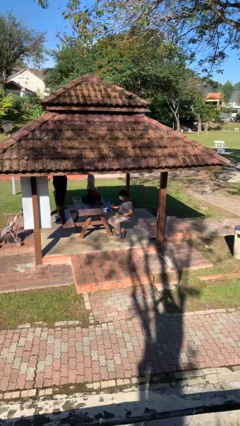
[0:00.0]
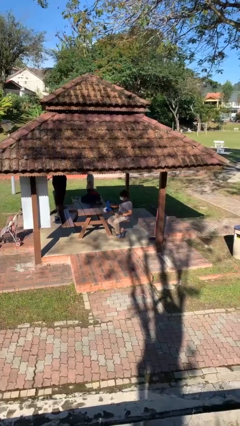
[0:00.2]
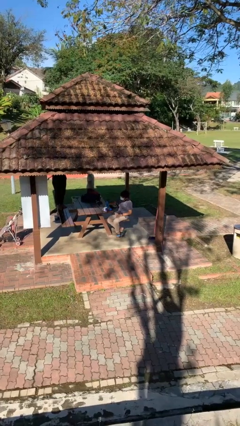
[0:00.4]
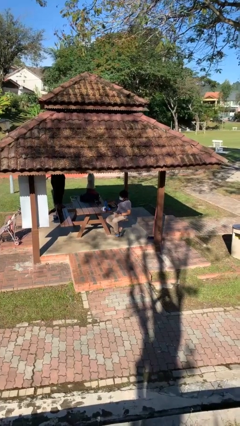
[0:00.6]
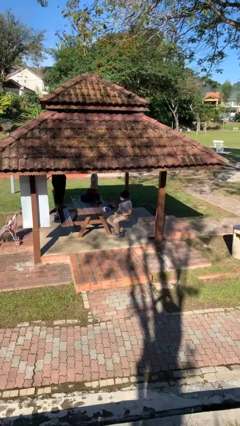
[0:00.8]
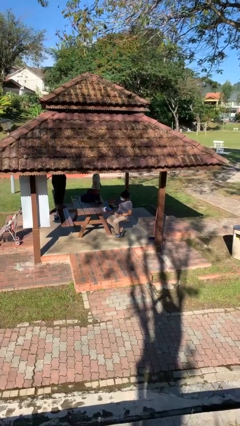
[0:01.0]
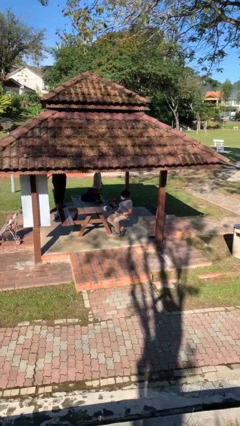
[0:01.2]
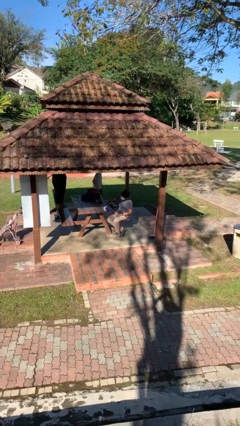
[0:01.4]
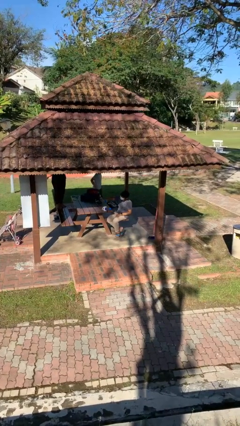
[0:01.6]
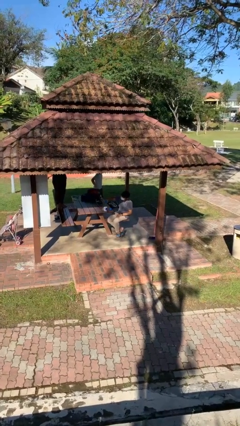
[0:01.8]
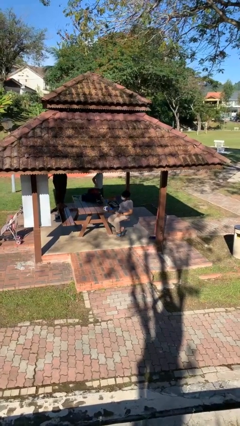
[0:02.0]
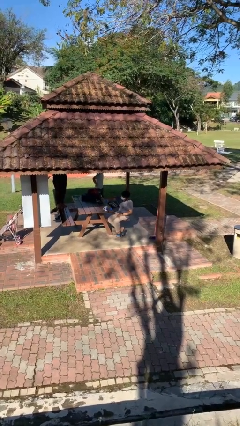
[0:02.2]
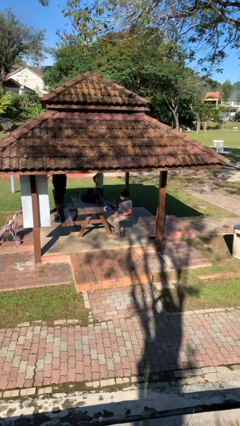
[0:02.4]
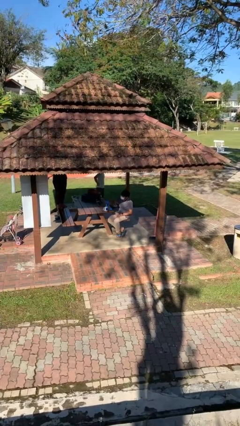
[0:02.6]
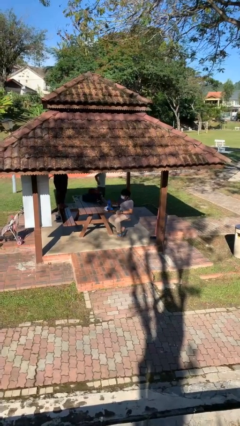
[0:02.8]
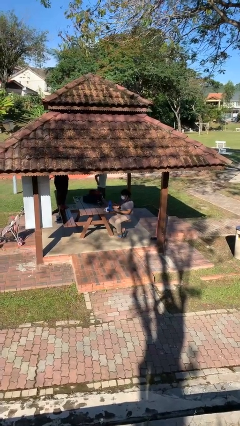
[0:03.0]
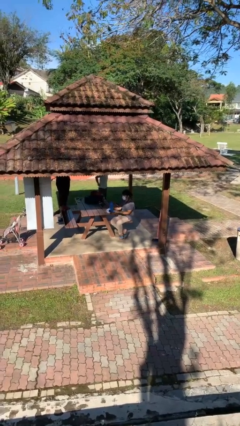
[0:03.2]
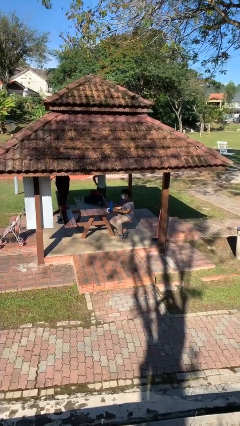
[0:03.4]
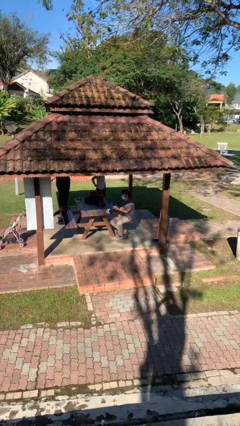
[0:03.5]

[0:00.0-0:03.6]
person pours liquid into cup

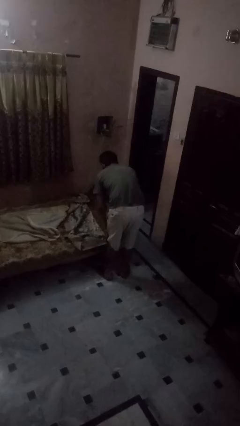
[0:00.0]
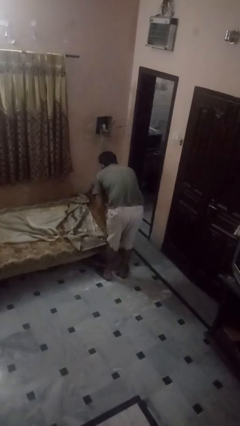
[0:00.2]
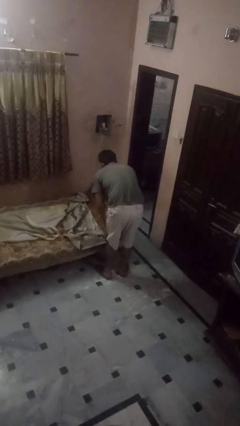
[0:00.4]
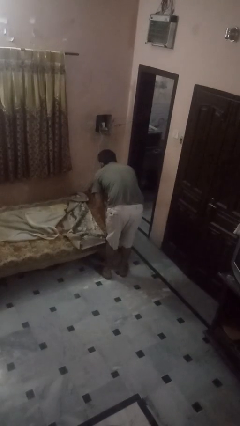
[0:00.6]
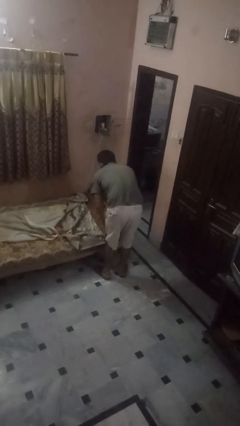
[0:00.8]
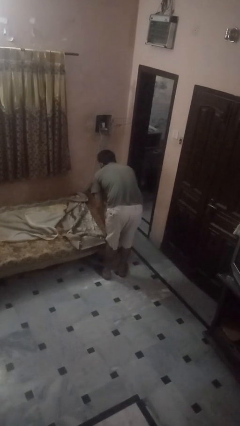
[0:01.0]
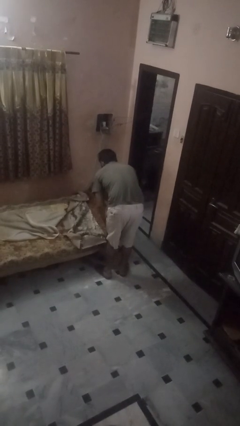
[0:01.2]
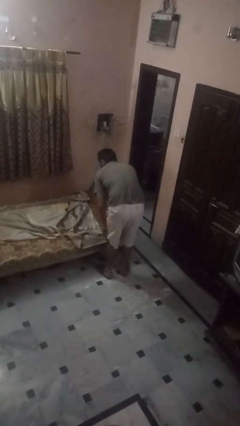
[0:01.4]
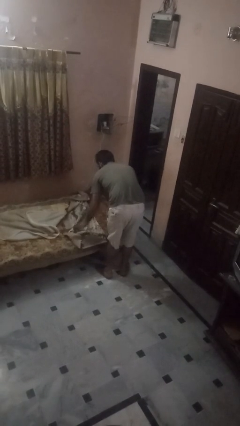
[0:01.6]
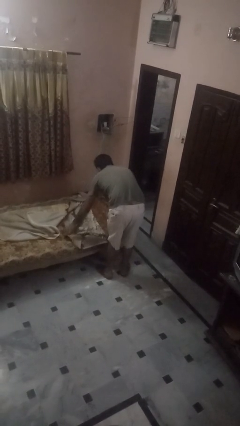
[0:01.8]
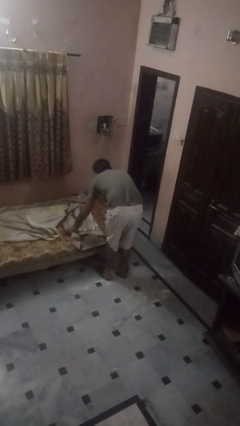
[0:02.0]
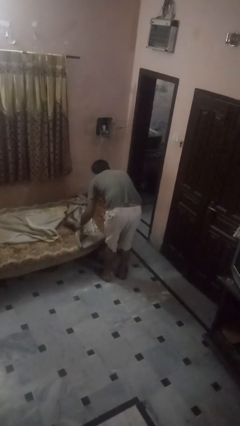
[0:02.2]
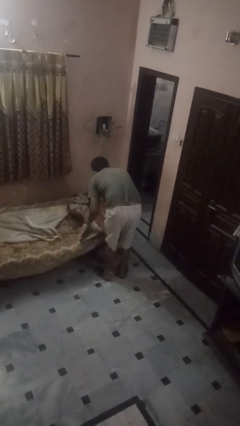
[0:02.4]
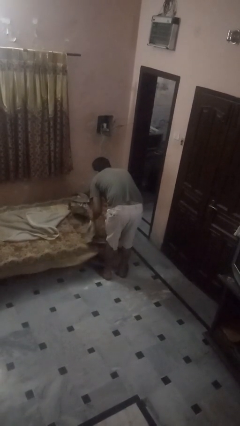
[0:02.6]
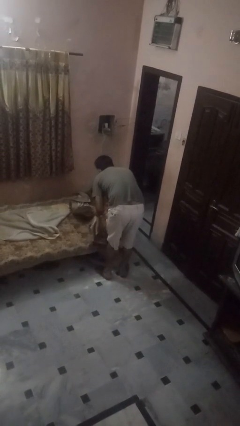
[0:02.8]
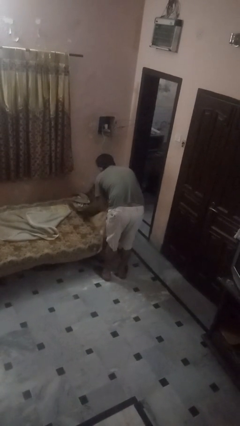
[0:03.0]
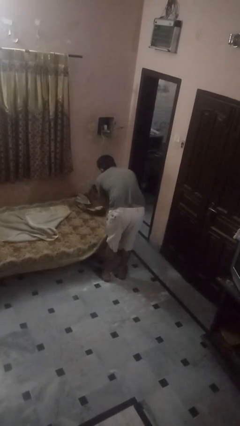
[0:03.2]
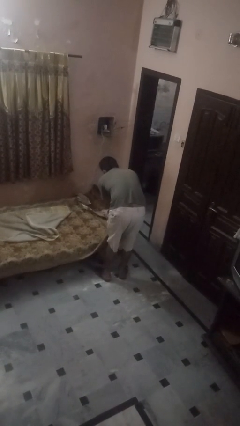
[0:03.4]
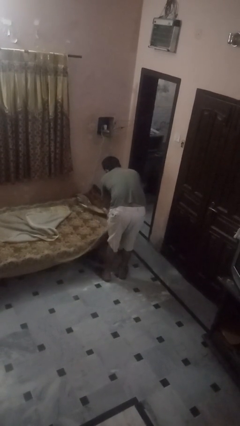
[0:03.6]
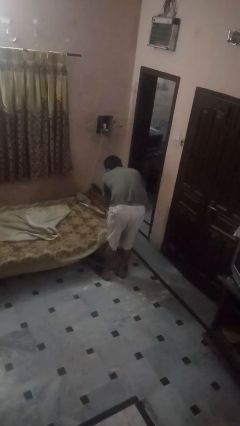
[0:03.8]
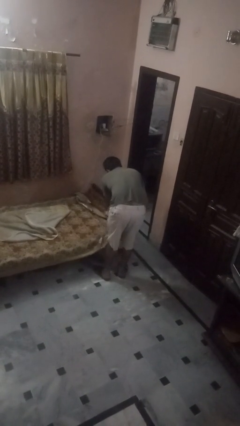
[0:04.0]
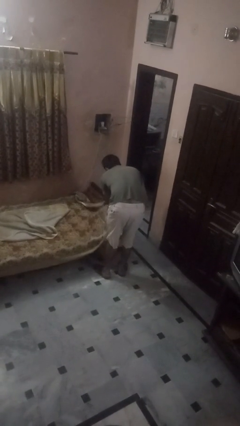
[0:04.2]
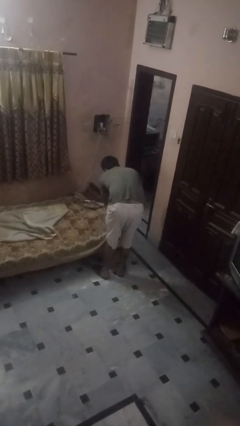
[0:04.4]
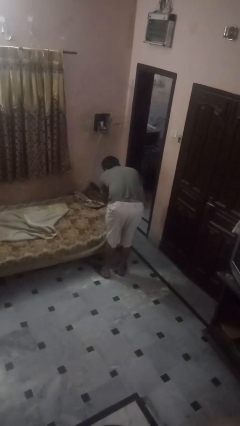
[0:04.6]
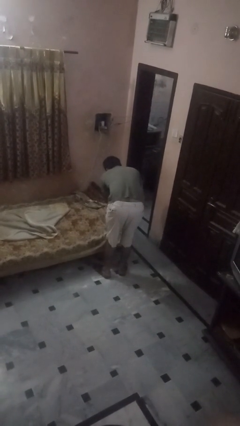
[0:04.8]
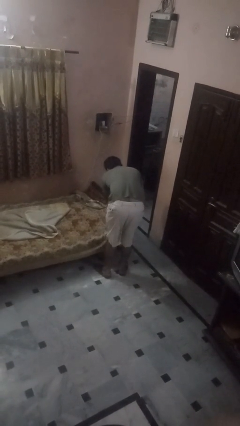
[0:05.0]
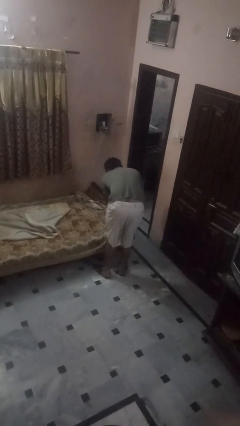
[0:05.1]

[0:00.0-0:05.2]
person makes bed

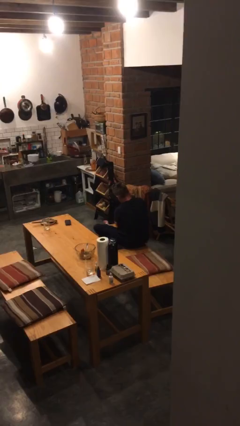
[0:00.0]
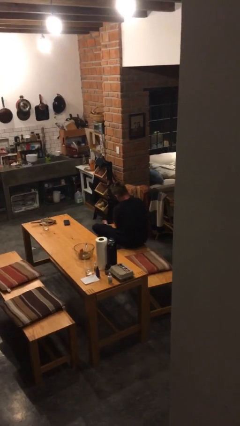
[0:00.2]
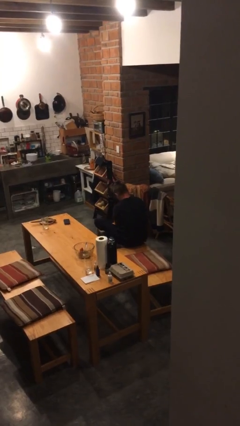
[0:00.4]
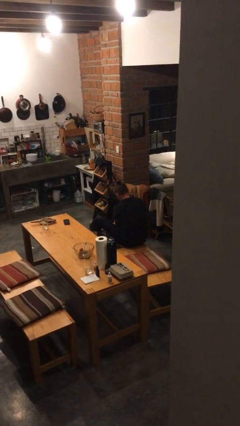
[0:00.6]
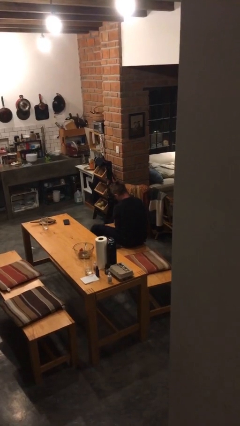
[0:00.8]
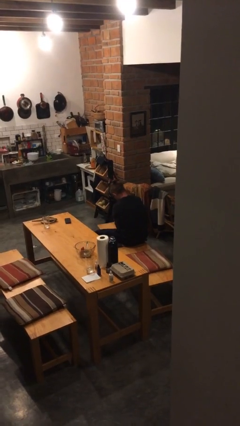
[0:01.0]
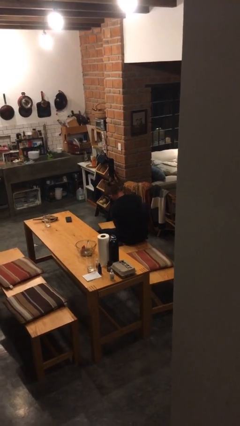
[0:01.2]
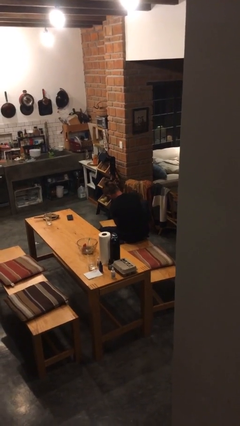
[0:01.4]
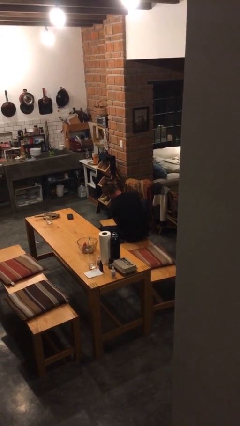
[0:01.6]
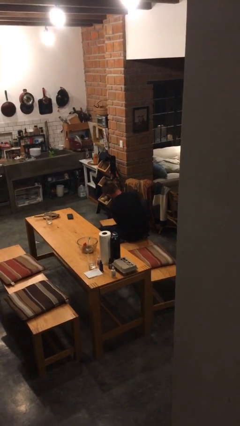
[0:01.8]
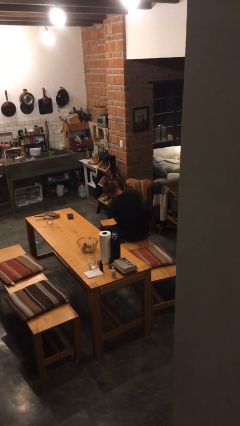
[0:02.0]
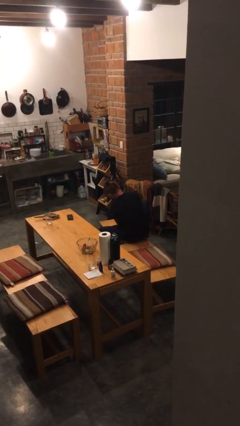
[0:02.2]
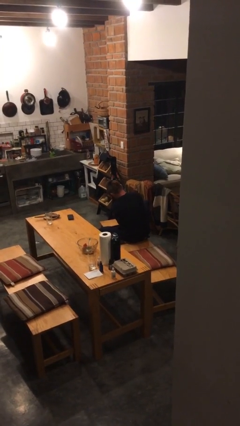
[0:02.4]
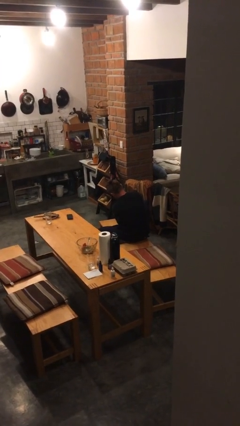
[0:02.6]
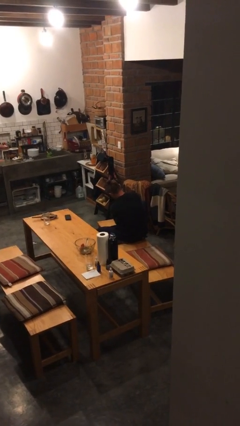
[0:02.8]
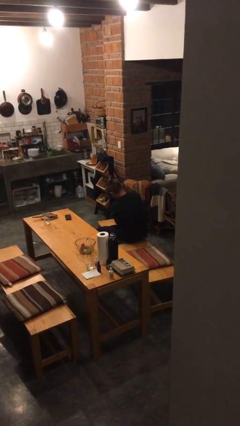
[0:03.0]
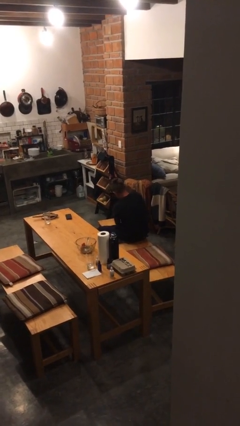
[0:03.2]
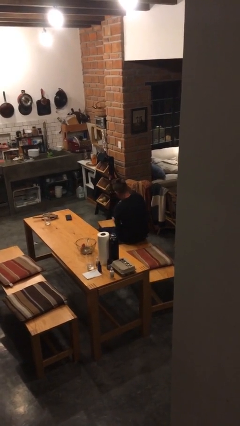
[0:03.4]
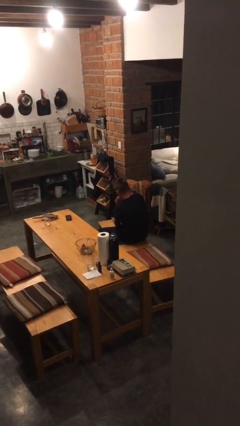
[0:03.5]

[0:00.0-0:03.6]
person rubs foot

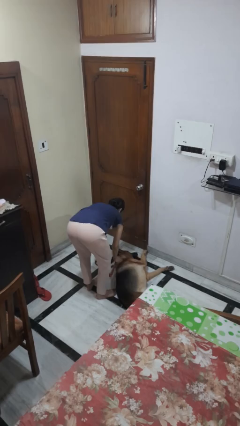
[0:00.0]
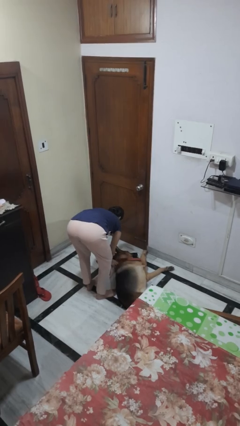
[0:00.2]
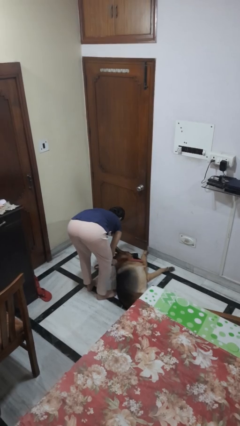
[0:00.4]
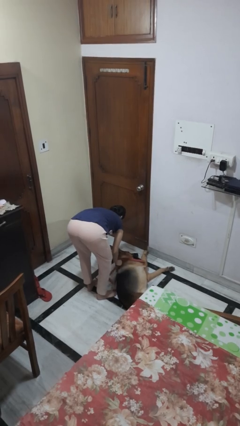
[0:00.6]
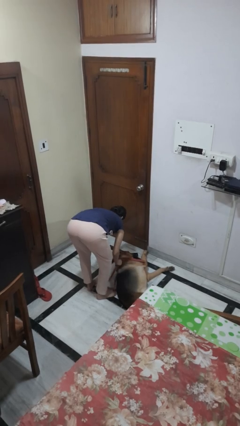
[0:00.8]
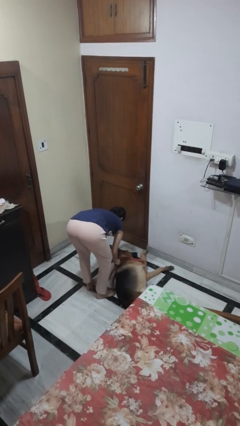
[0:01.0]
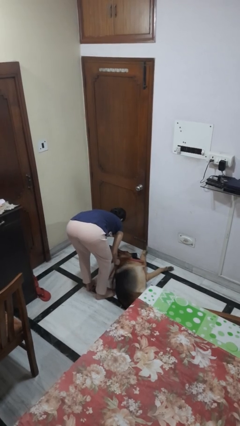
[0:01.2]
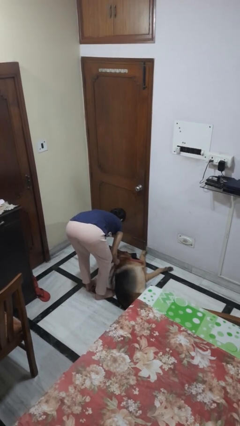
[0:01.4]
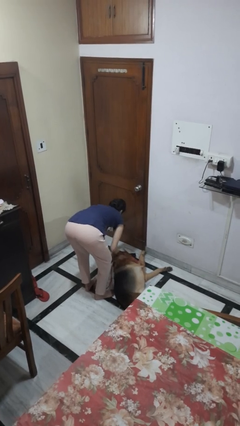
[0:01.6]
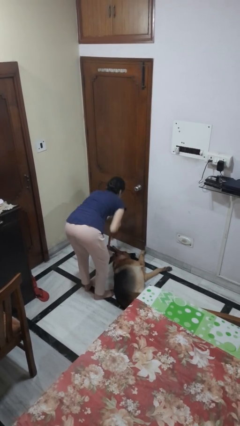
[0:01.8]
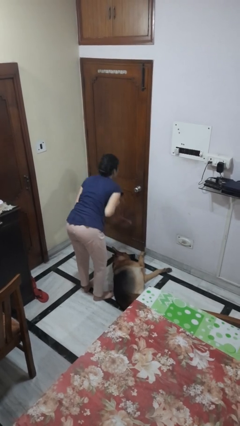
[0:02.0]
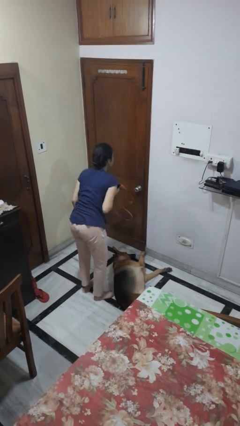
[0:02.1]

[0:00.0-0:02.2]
person unattaches leash from dog

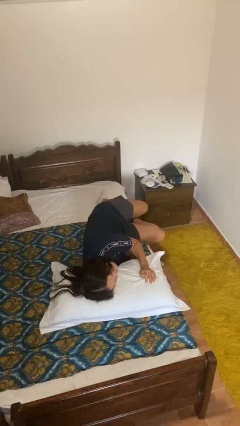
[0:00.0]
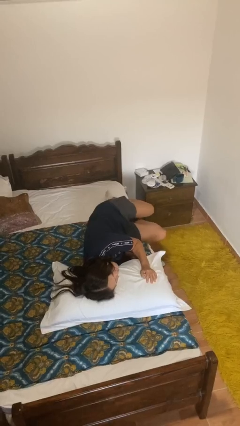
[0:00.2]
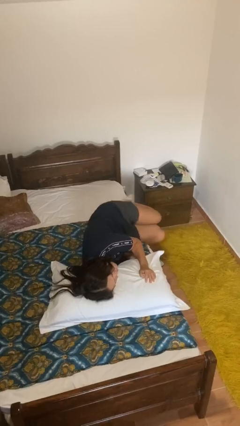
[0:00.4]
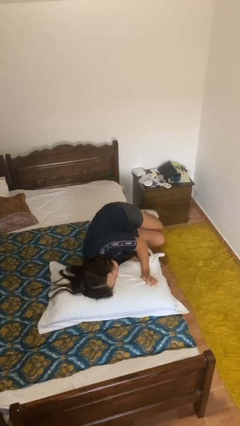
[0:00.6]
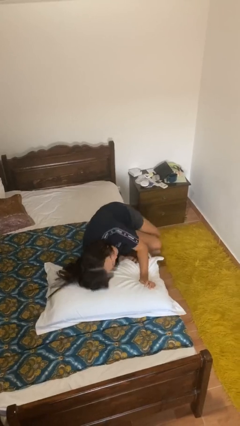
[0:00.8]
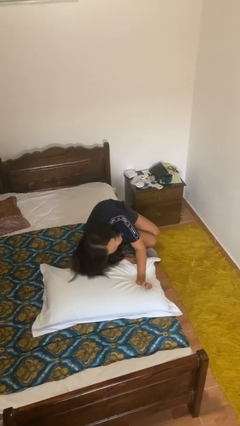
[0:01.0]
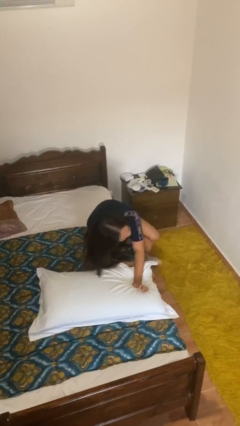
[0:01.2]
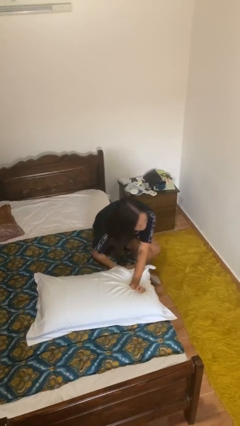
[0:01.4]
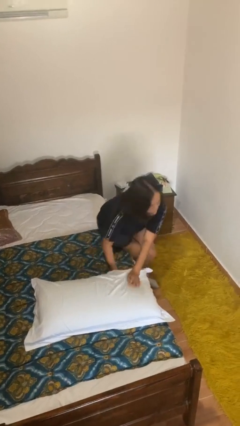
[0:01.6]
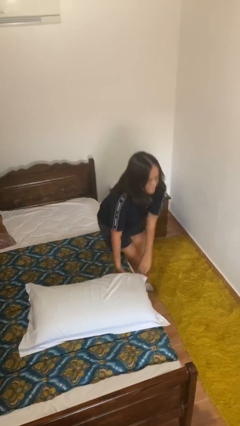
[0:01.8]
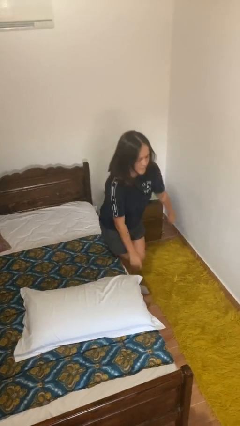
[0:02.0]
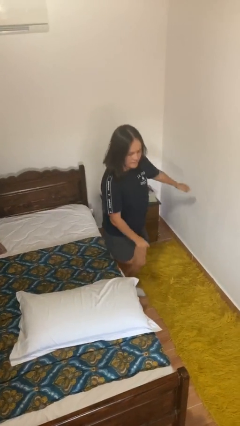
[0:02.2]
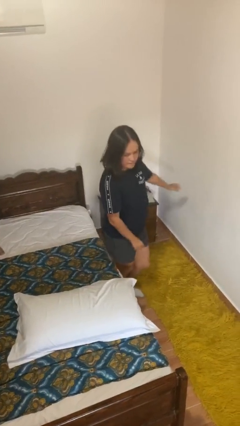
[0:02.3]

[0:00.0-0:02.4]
person stands up

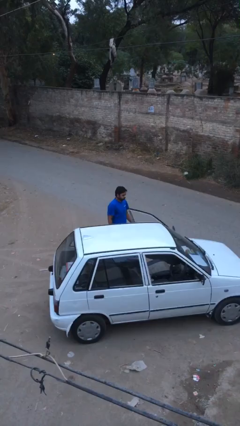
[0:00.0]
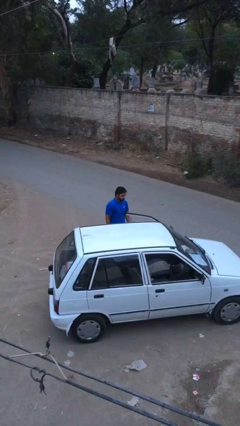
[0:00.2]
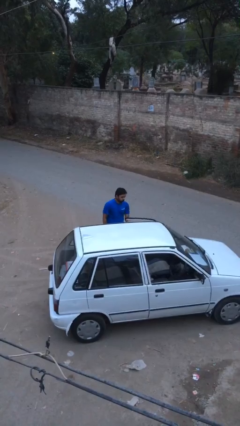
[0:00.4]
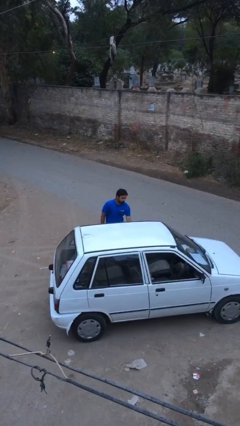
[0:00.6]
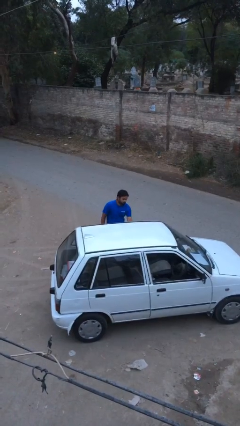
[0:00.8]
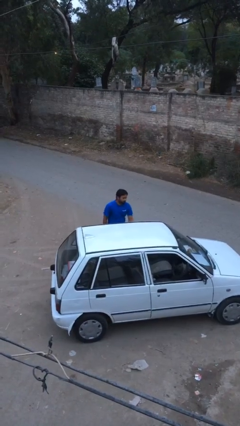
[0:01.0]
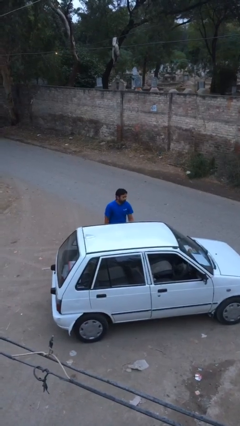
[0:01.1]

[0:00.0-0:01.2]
person closes car door
